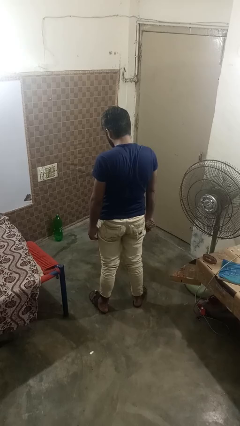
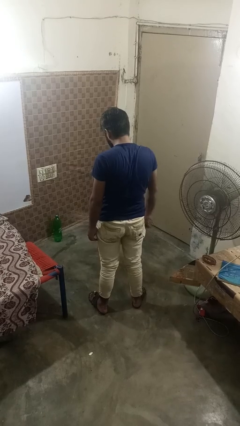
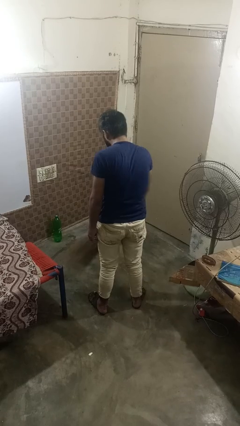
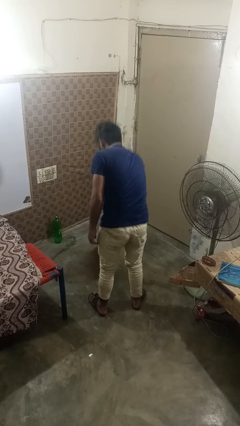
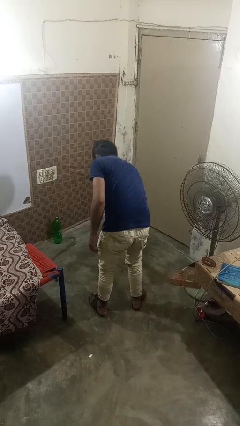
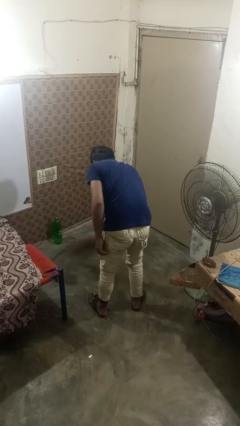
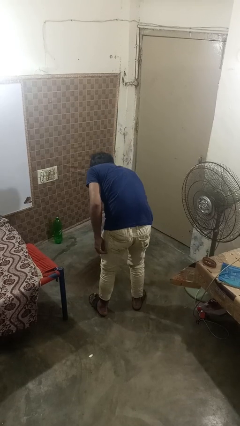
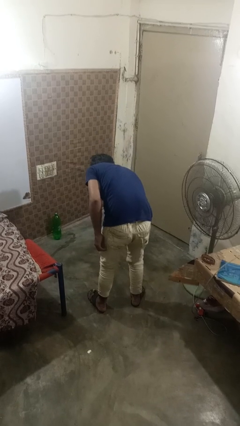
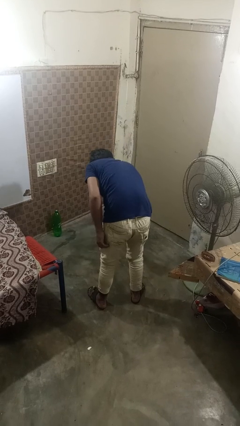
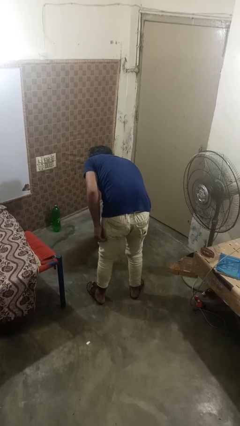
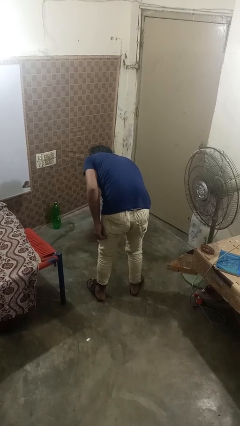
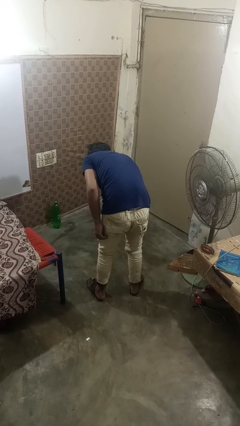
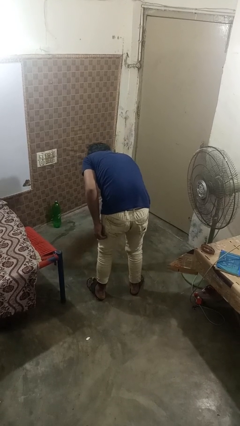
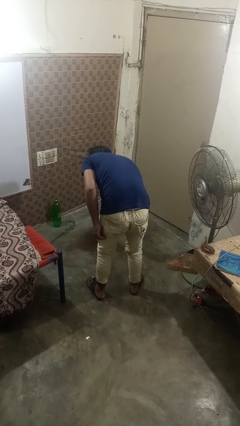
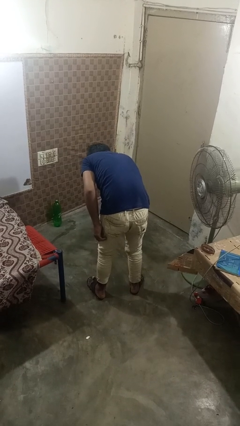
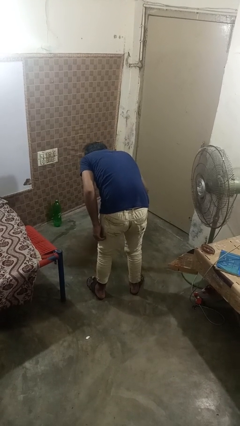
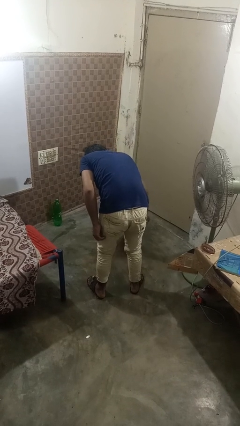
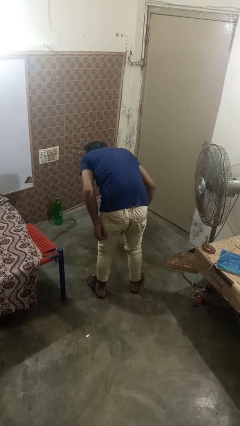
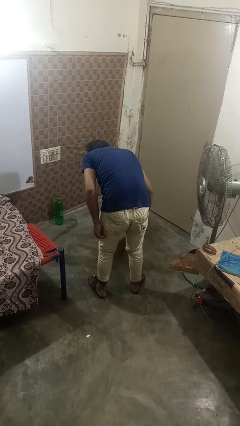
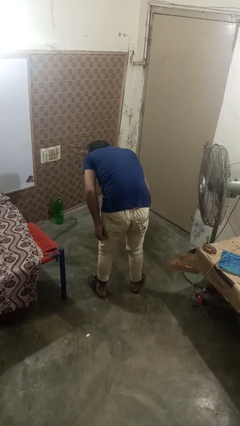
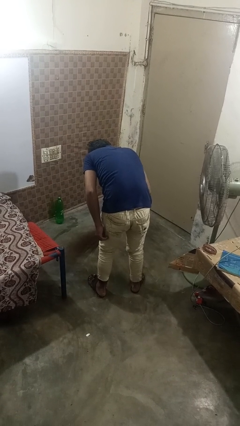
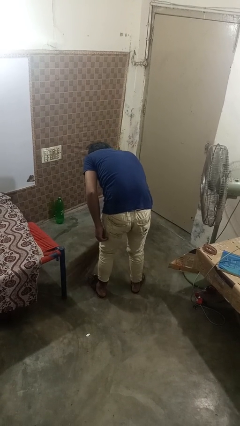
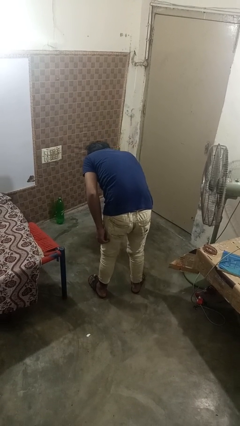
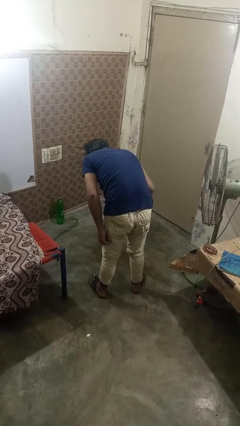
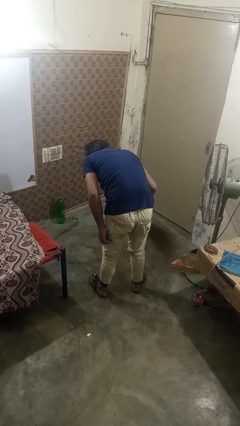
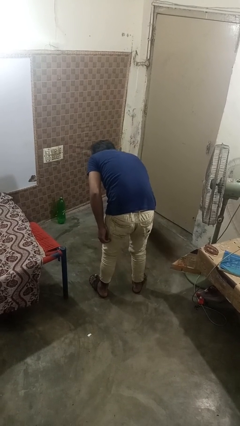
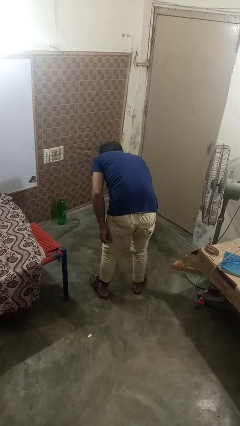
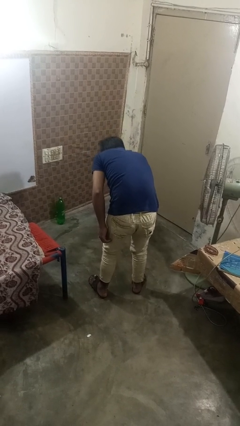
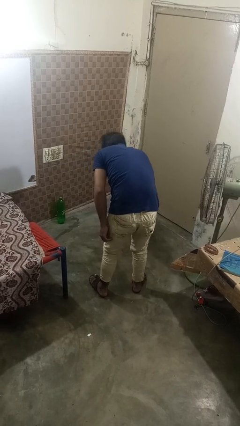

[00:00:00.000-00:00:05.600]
person sweeps floor

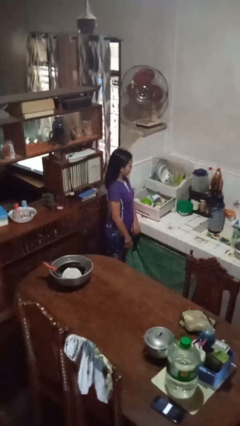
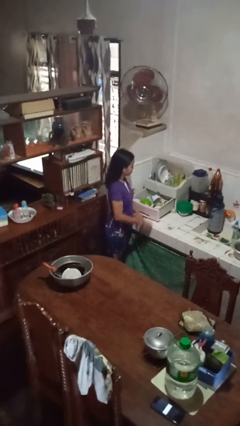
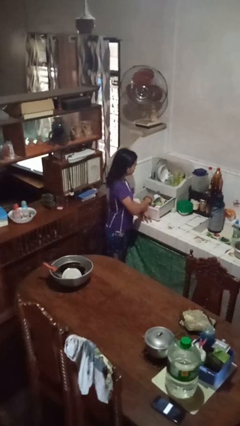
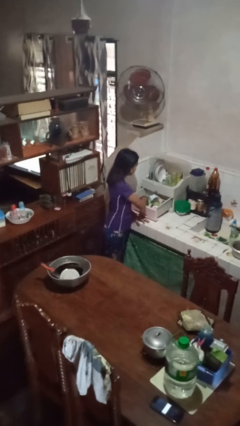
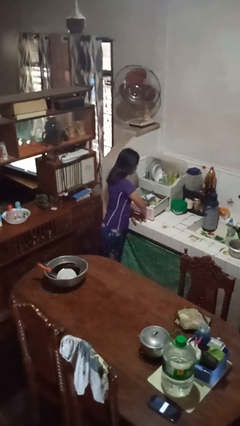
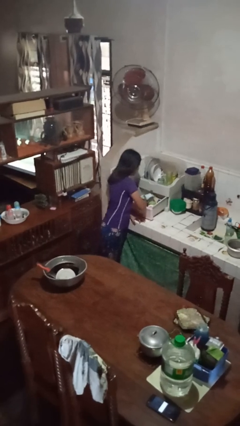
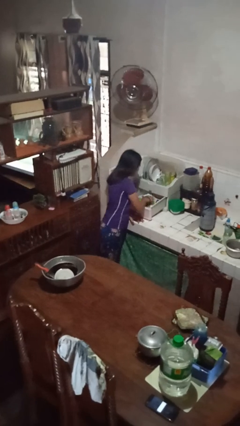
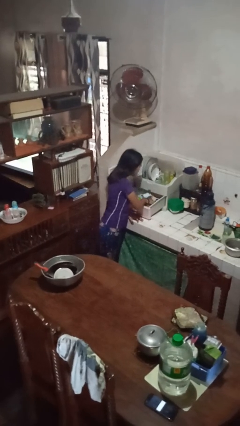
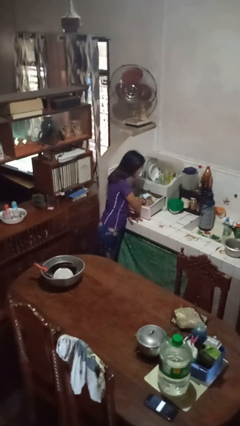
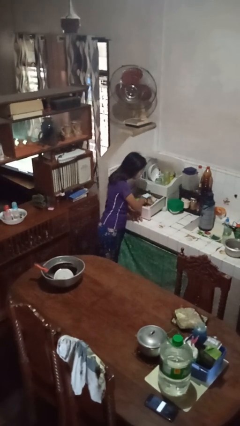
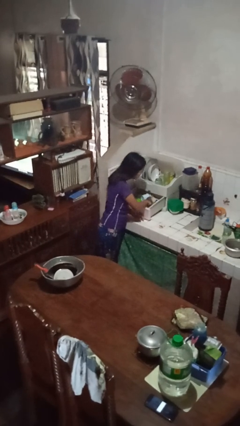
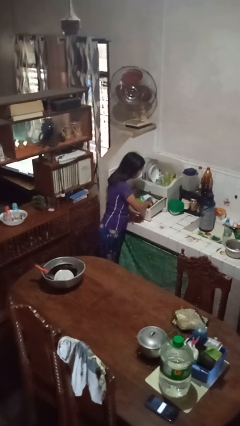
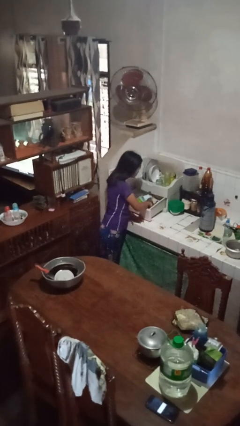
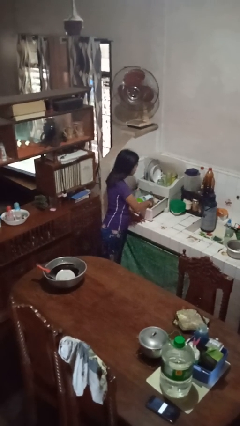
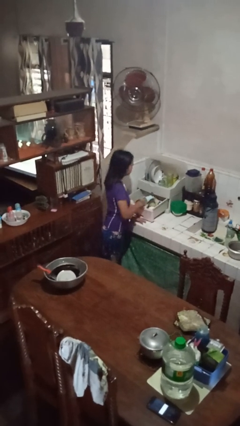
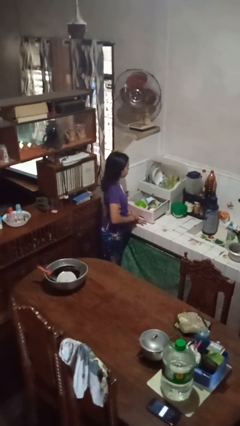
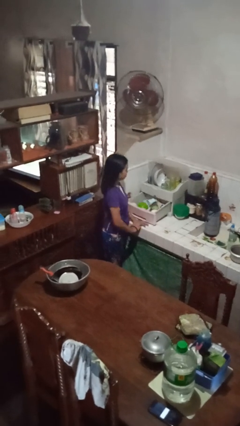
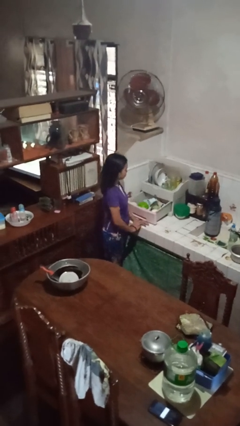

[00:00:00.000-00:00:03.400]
person searches in kitchen drawer

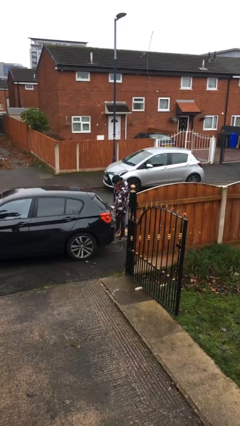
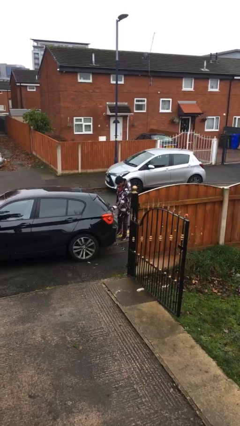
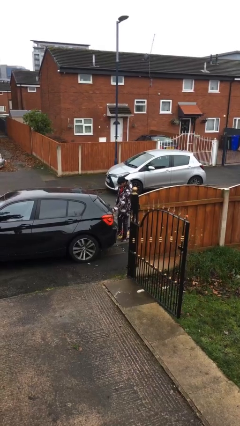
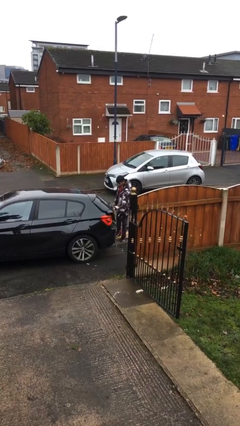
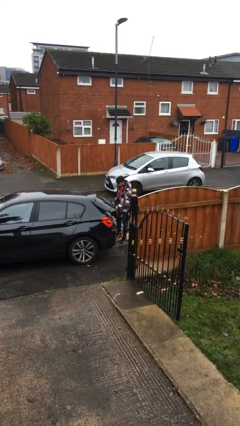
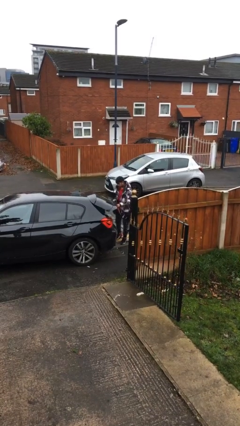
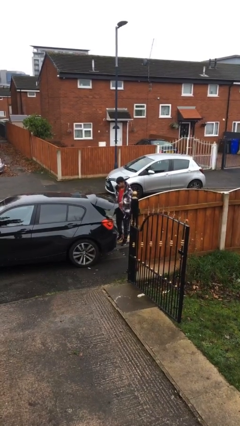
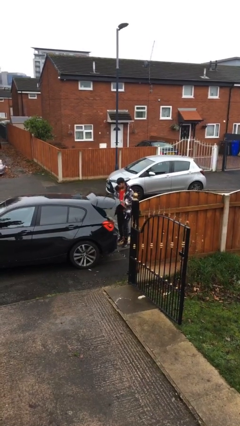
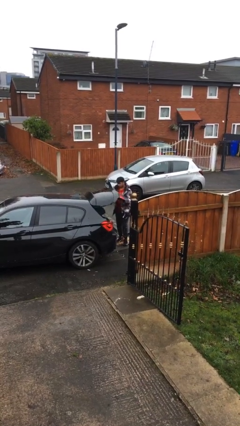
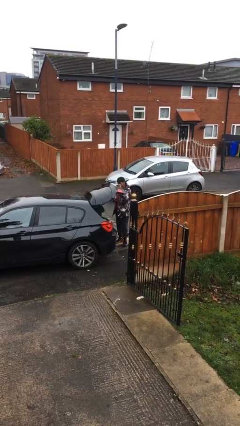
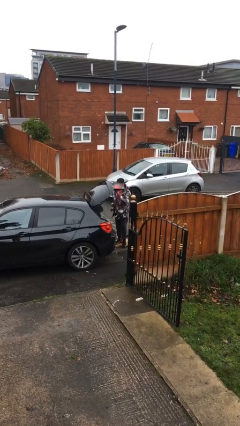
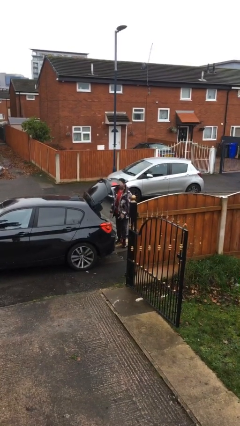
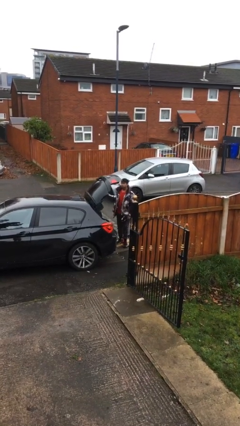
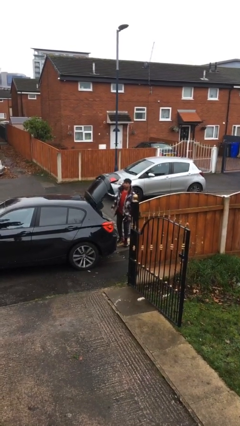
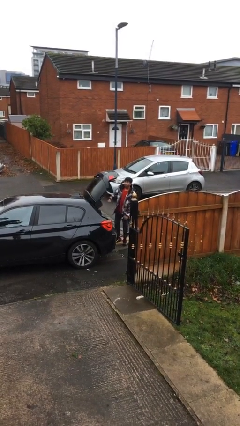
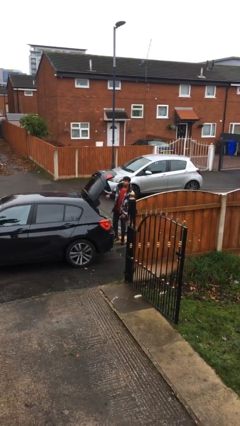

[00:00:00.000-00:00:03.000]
person opens car trunk

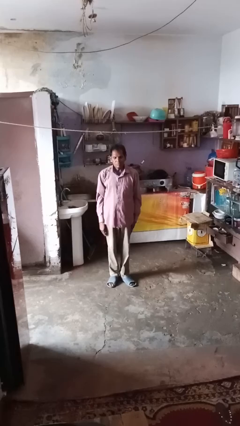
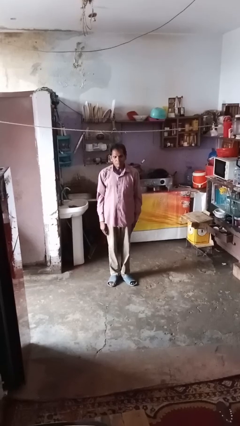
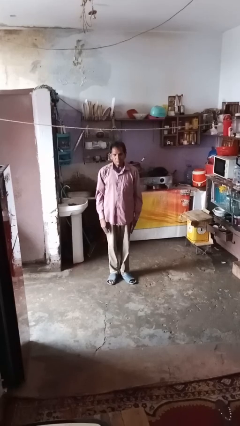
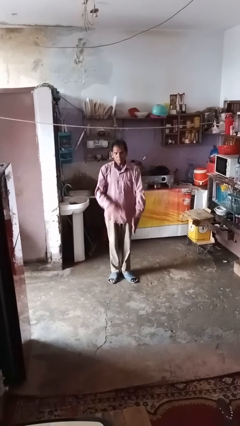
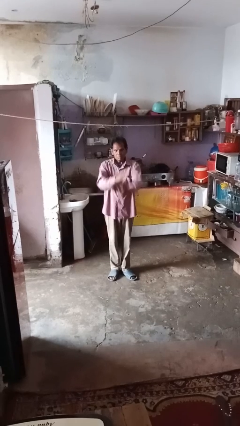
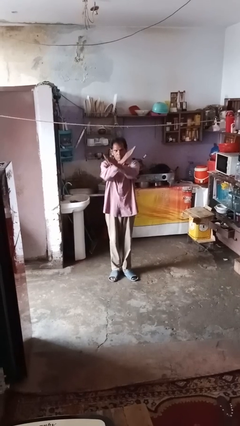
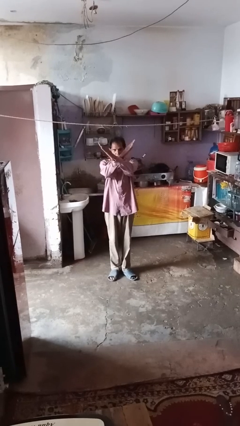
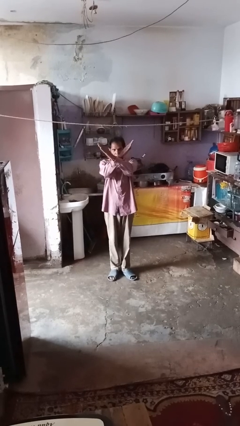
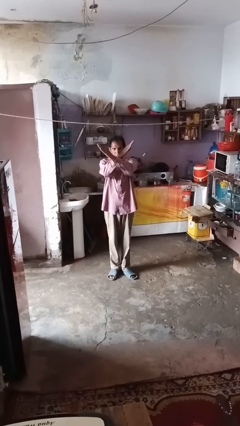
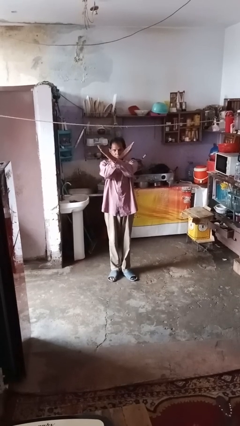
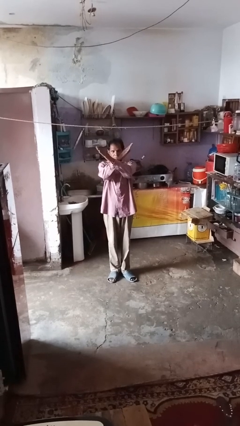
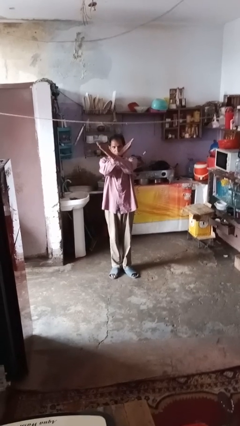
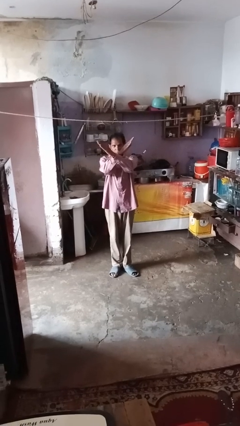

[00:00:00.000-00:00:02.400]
person gestures arms x

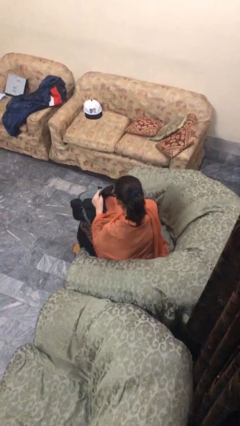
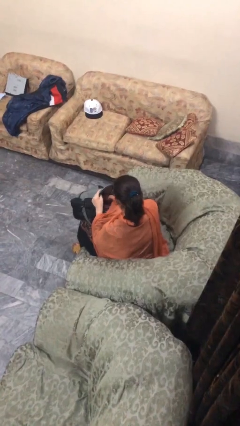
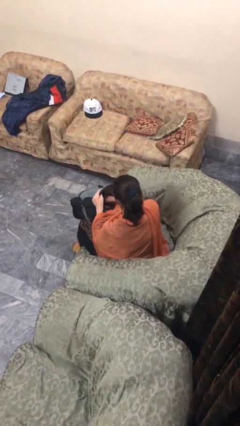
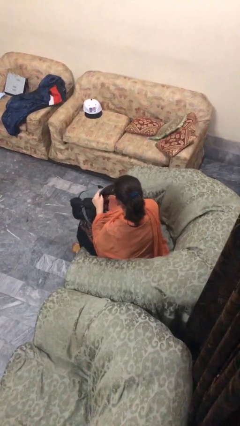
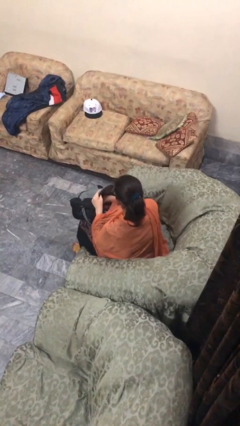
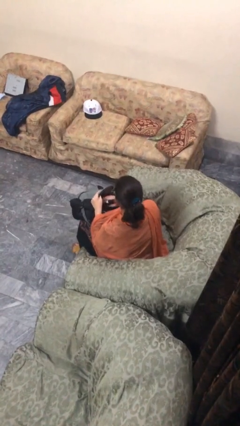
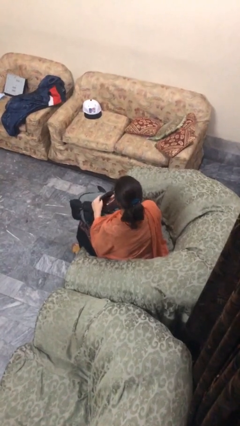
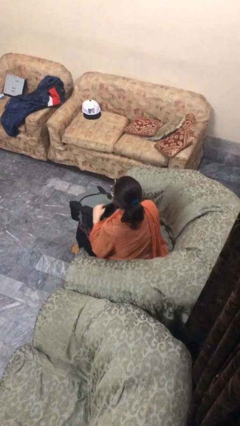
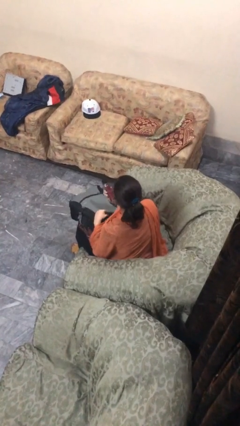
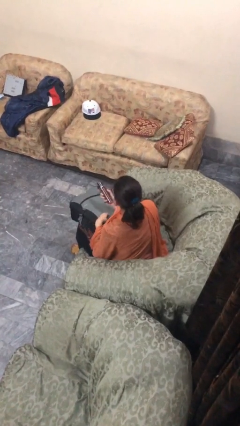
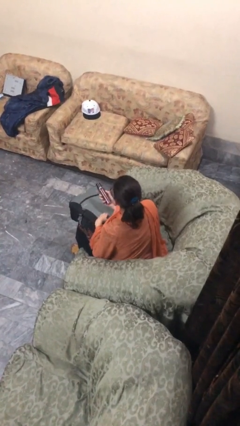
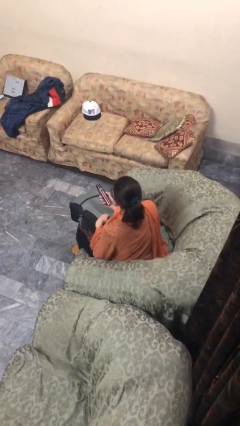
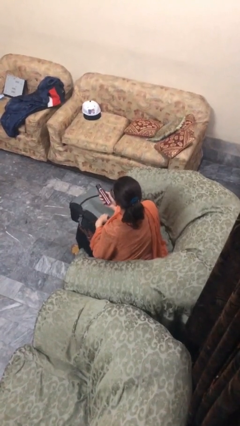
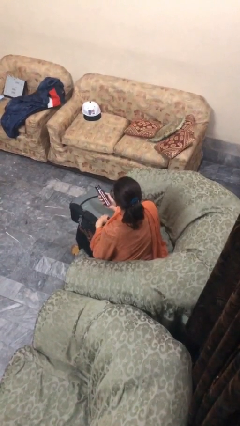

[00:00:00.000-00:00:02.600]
person takes object from backpack

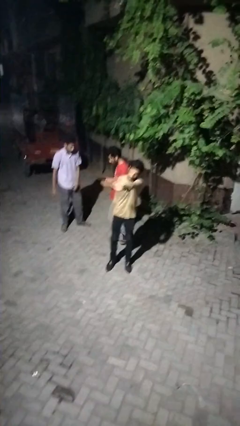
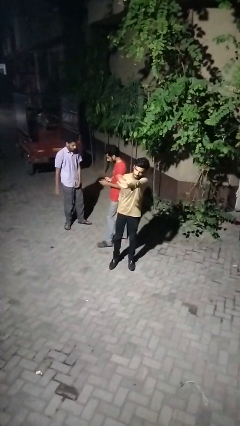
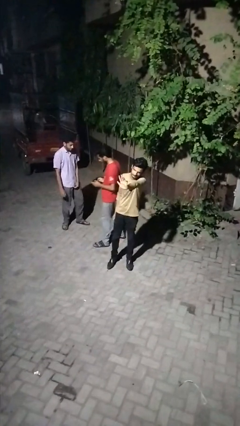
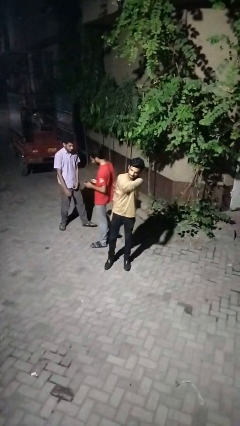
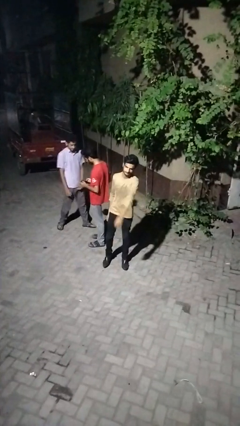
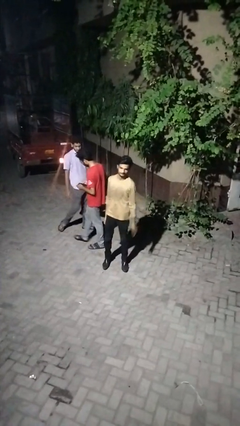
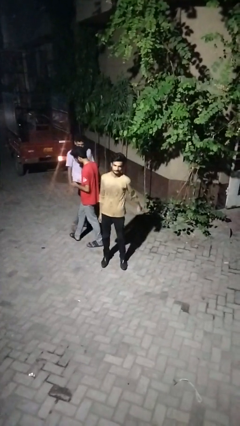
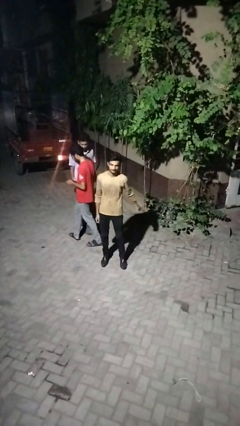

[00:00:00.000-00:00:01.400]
person waves at person
